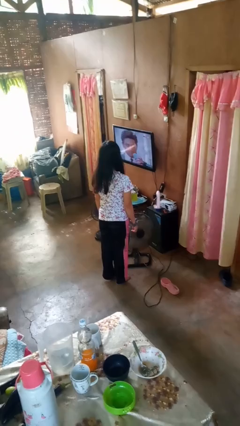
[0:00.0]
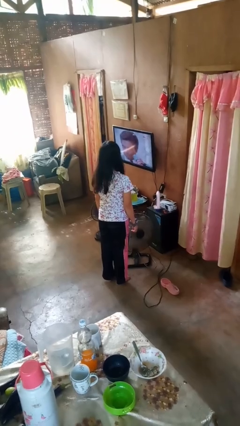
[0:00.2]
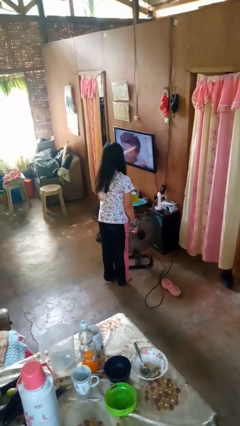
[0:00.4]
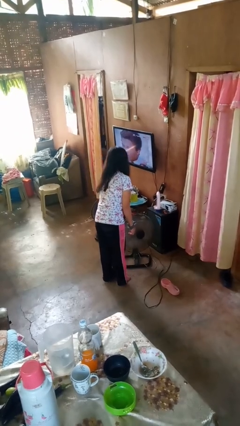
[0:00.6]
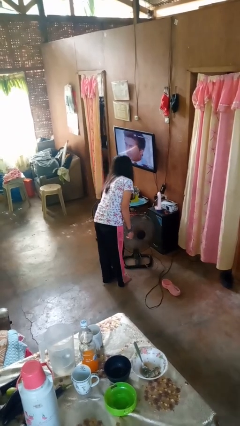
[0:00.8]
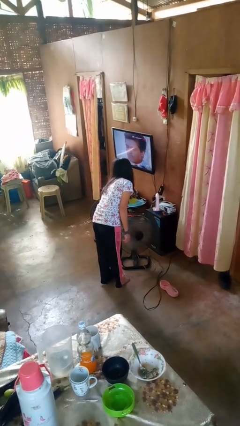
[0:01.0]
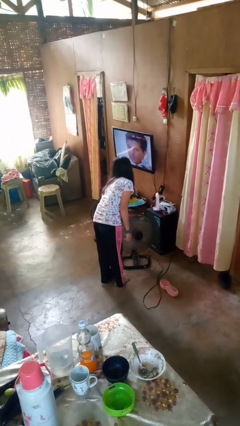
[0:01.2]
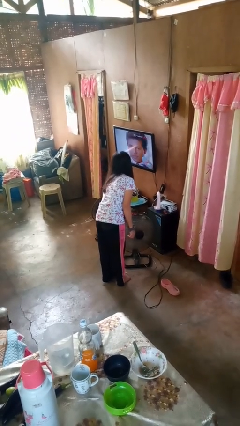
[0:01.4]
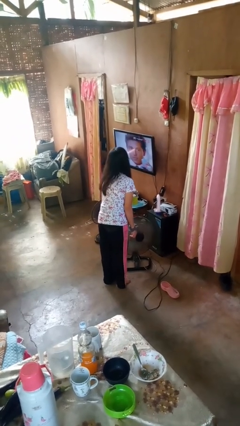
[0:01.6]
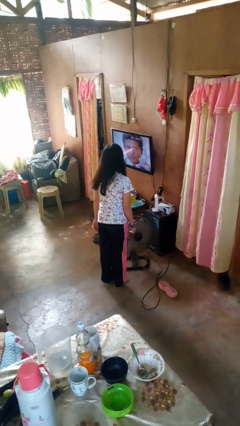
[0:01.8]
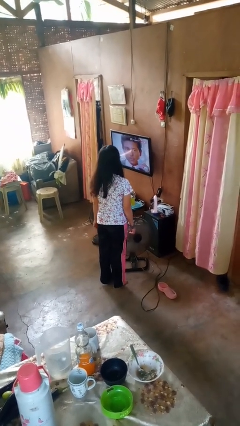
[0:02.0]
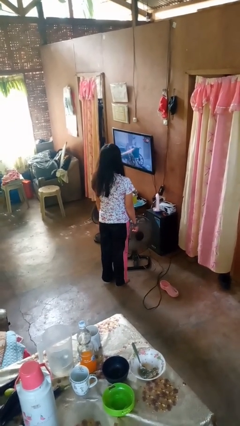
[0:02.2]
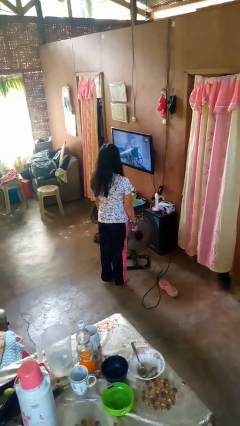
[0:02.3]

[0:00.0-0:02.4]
person turns off fan

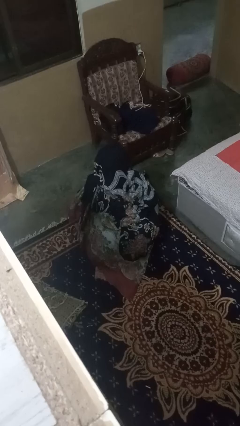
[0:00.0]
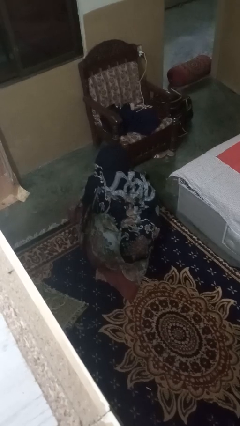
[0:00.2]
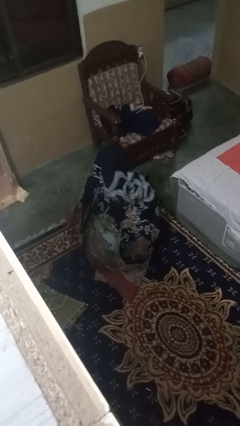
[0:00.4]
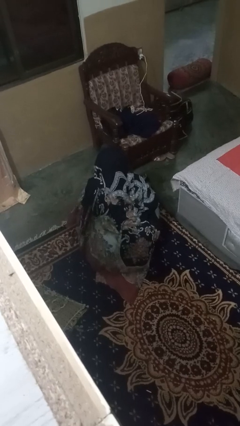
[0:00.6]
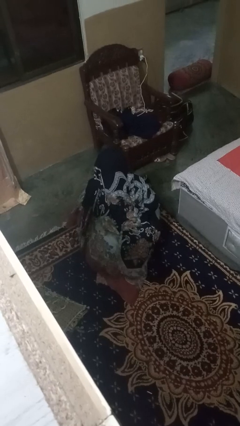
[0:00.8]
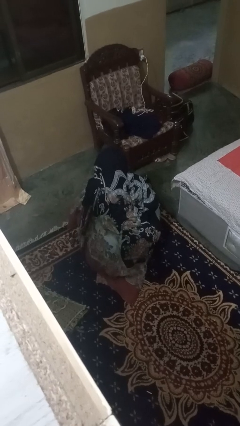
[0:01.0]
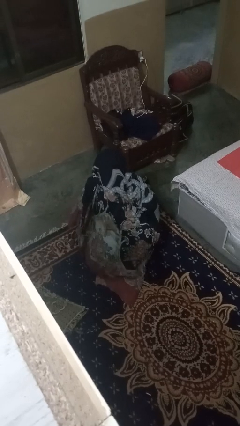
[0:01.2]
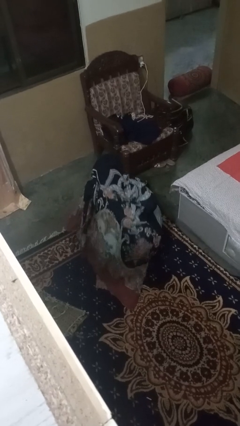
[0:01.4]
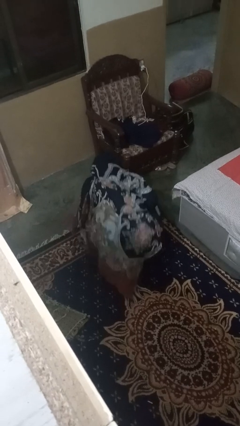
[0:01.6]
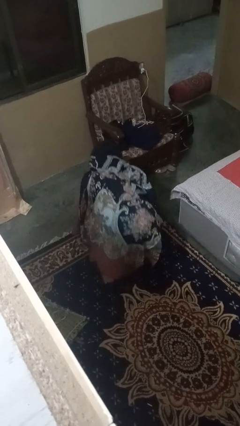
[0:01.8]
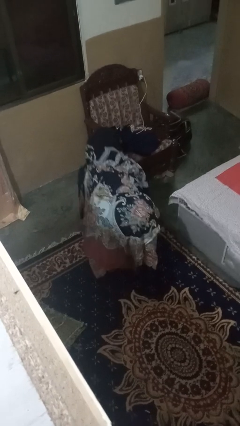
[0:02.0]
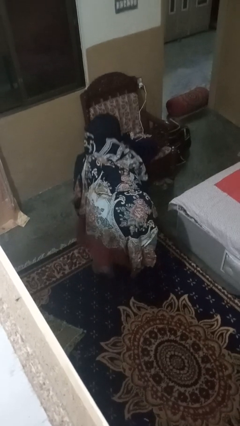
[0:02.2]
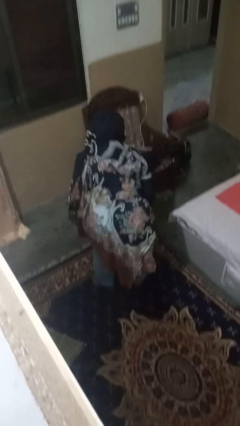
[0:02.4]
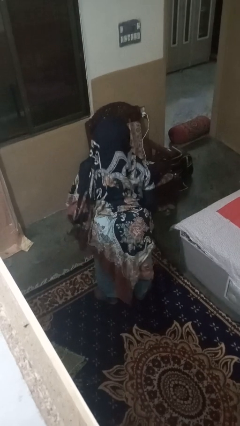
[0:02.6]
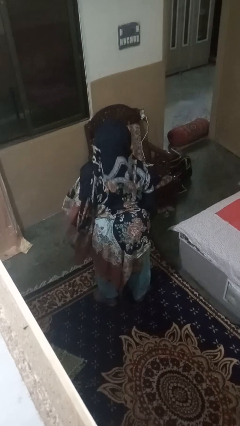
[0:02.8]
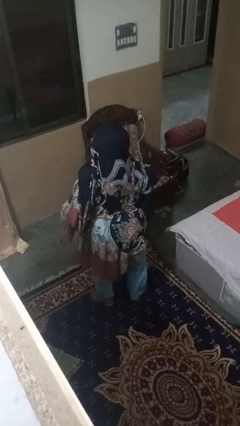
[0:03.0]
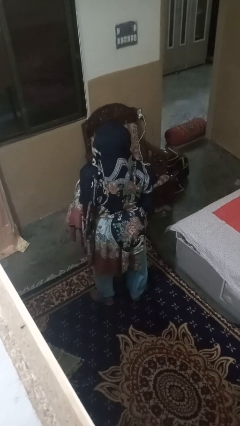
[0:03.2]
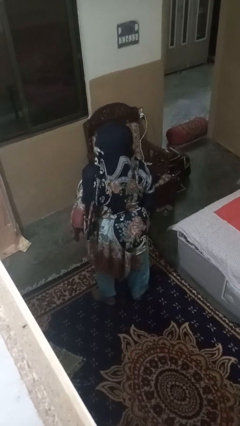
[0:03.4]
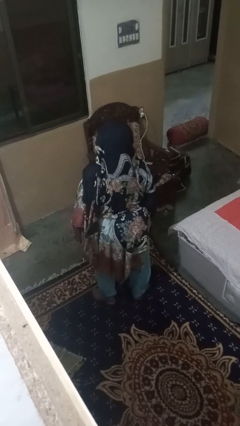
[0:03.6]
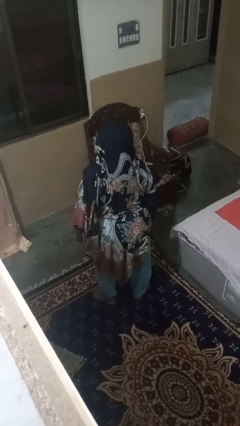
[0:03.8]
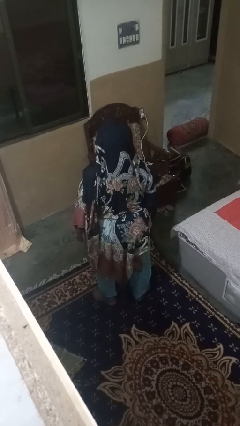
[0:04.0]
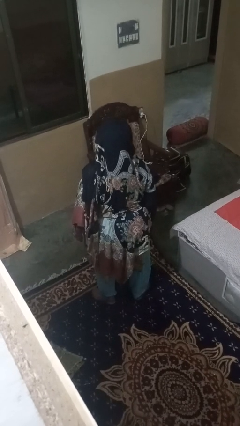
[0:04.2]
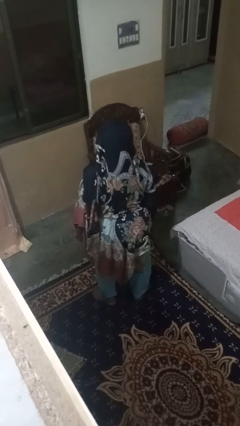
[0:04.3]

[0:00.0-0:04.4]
person stands up

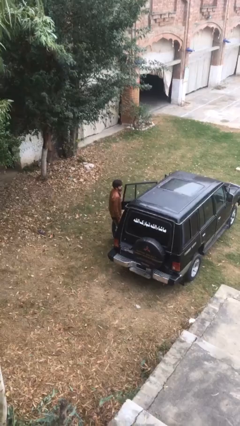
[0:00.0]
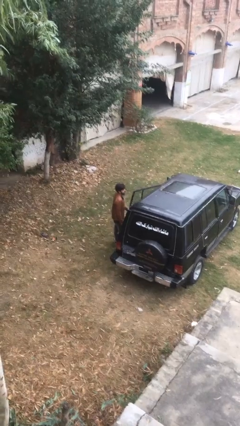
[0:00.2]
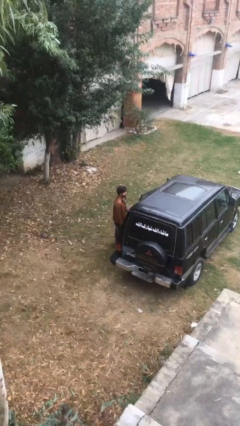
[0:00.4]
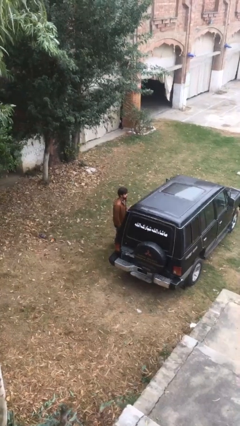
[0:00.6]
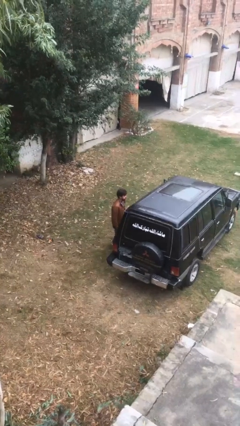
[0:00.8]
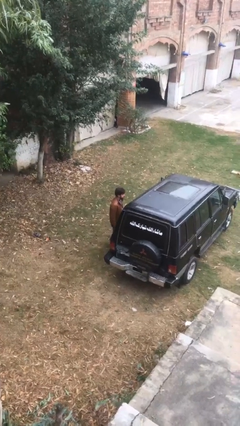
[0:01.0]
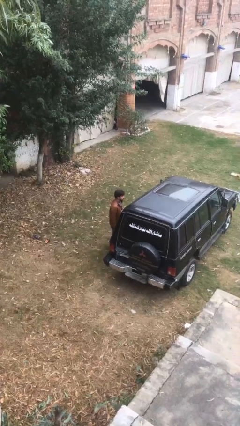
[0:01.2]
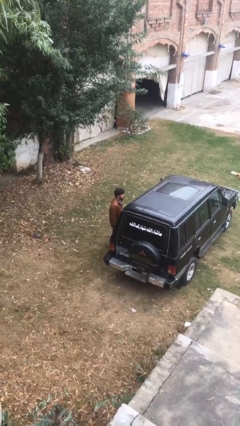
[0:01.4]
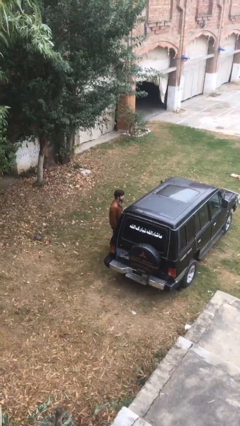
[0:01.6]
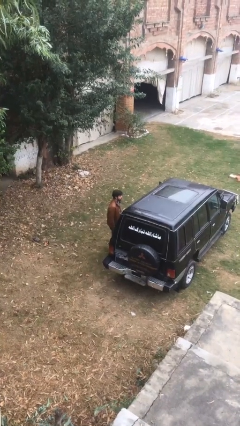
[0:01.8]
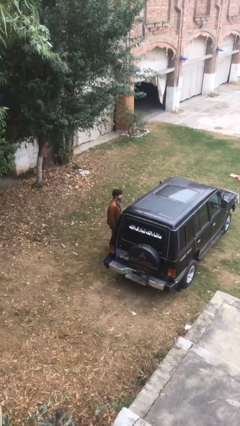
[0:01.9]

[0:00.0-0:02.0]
person closes car door

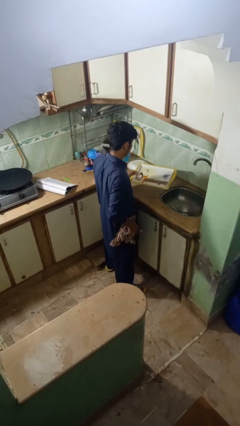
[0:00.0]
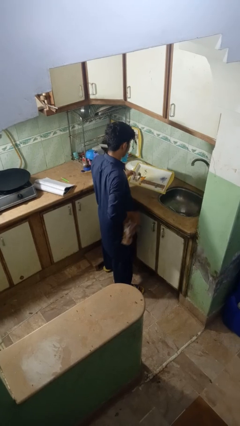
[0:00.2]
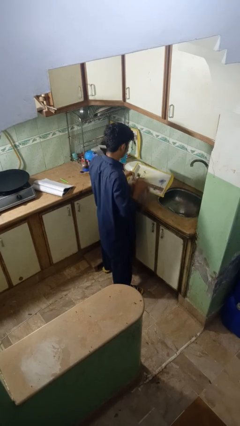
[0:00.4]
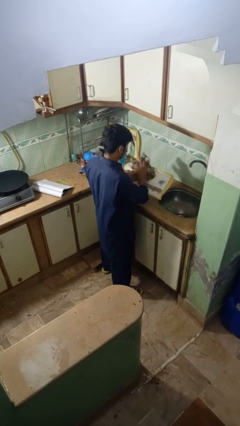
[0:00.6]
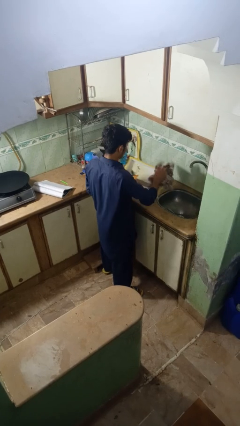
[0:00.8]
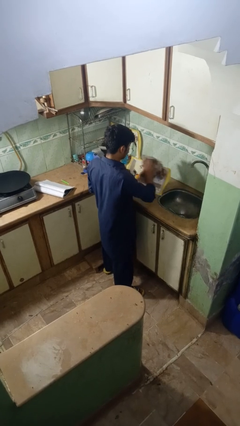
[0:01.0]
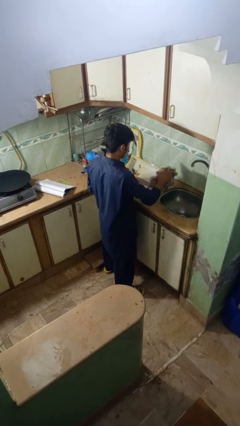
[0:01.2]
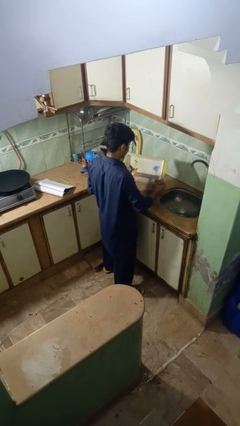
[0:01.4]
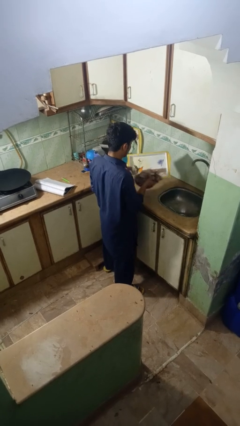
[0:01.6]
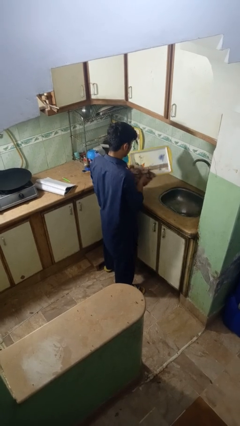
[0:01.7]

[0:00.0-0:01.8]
person dries dish

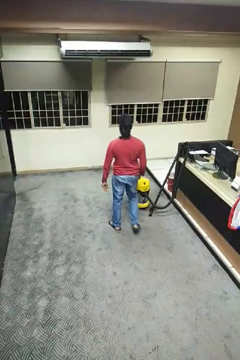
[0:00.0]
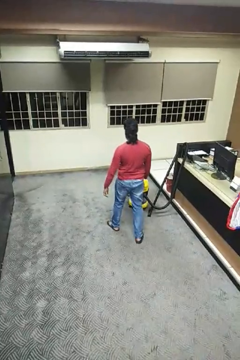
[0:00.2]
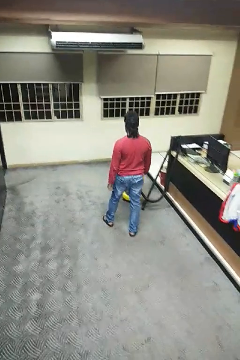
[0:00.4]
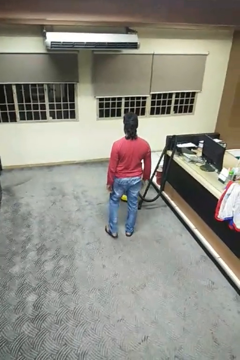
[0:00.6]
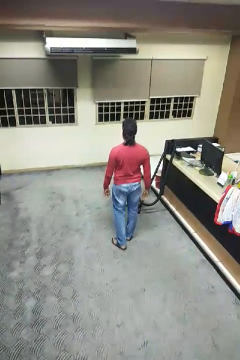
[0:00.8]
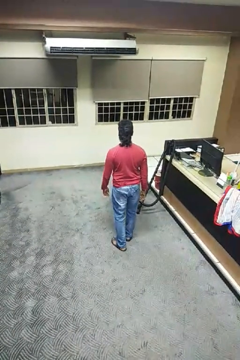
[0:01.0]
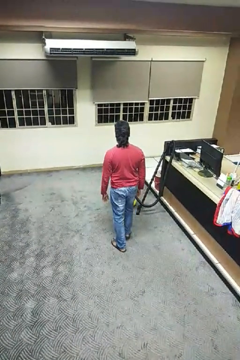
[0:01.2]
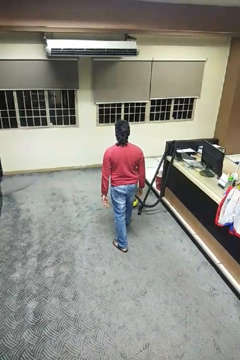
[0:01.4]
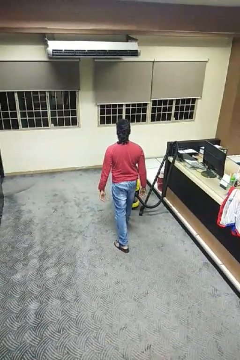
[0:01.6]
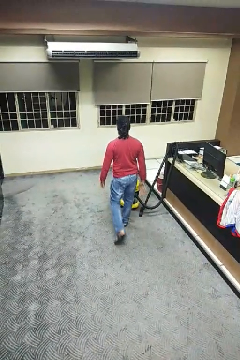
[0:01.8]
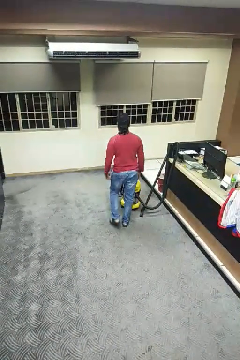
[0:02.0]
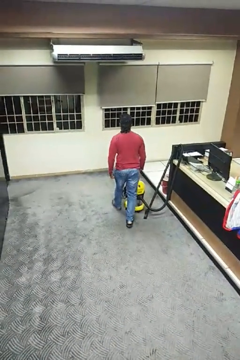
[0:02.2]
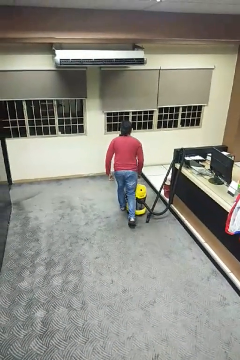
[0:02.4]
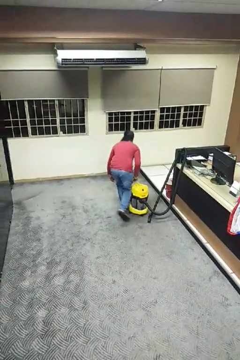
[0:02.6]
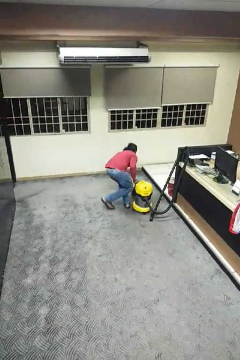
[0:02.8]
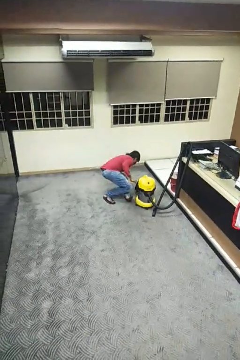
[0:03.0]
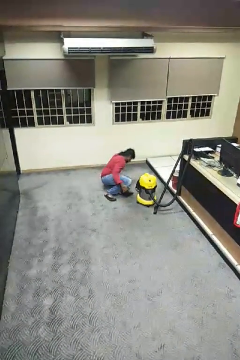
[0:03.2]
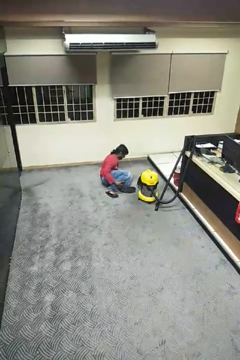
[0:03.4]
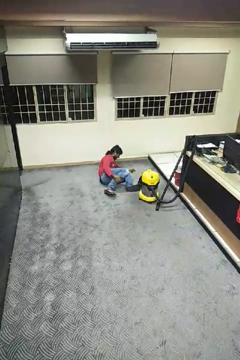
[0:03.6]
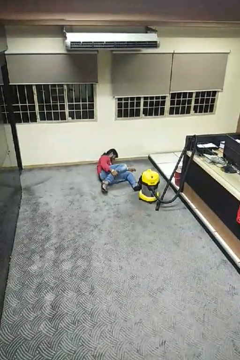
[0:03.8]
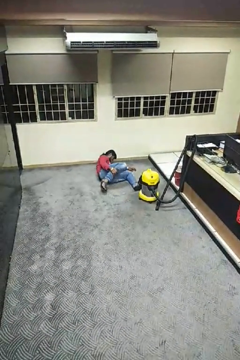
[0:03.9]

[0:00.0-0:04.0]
person trips on object on floor

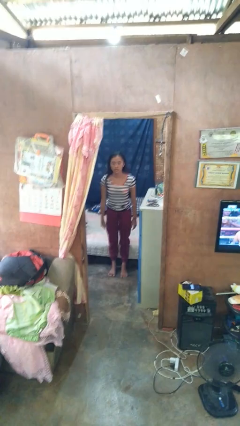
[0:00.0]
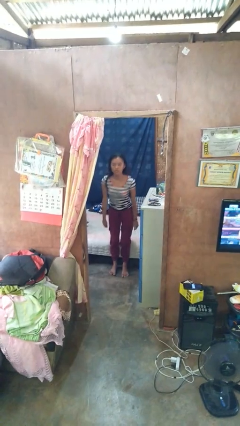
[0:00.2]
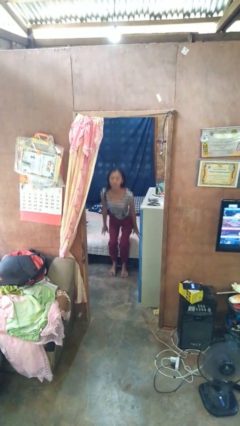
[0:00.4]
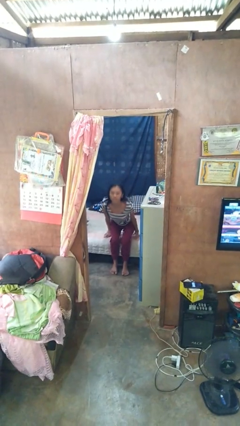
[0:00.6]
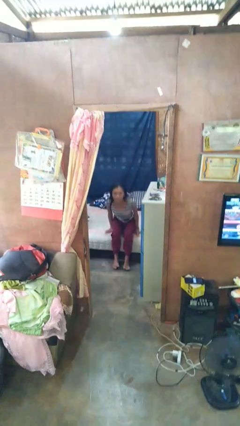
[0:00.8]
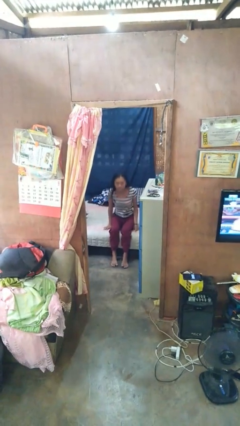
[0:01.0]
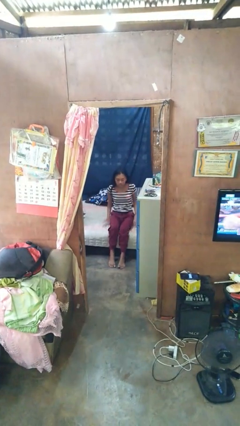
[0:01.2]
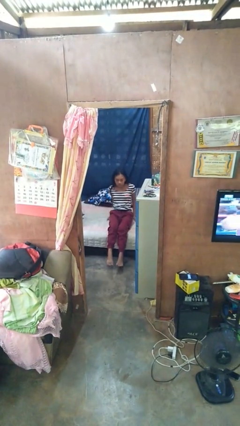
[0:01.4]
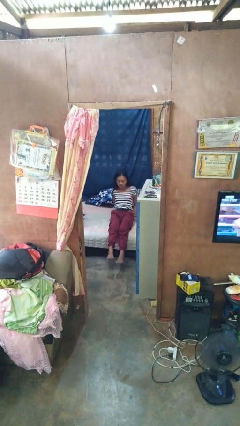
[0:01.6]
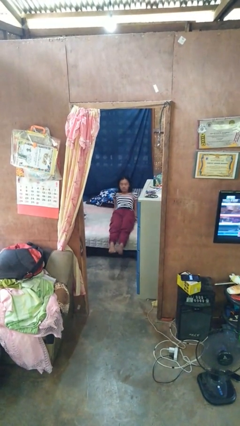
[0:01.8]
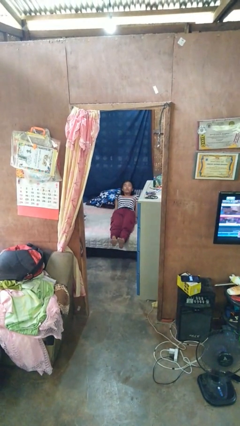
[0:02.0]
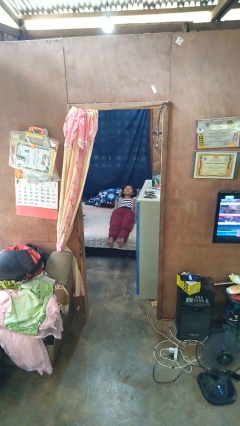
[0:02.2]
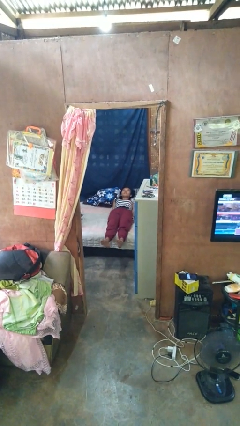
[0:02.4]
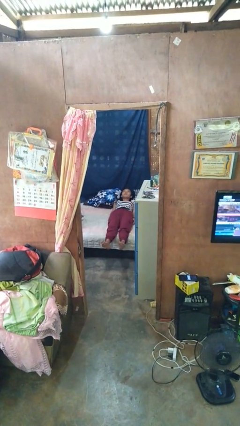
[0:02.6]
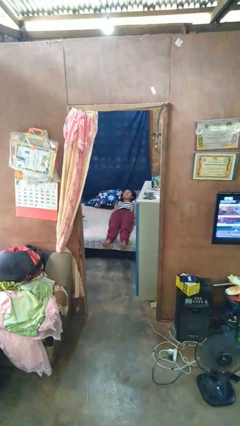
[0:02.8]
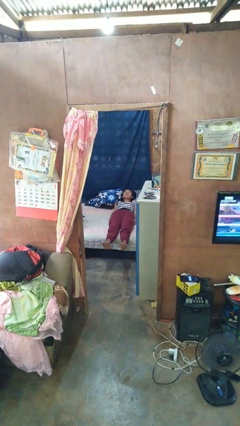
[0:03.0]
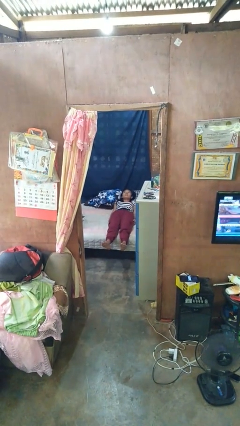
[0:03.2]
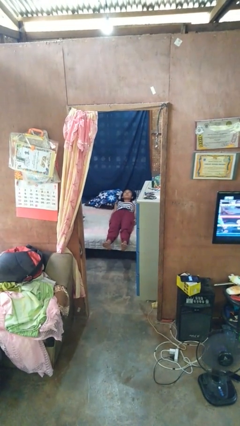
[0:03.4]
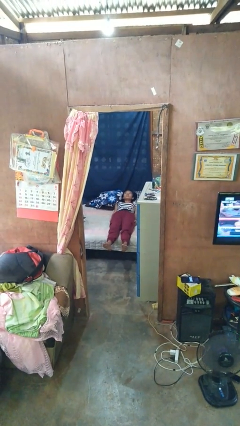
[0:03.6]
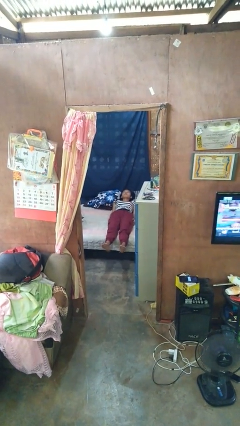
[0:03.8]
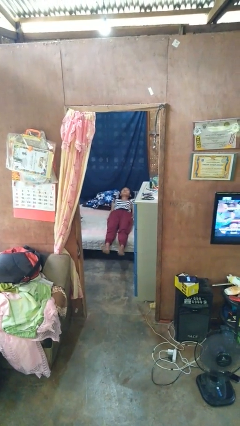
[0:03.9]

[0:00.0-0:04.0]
person lies down on bed
